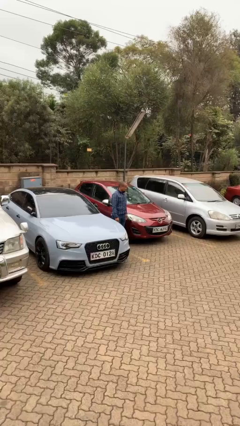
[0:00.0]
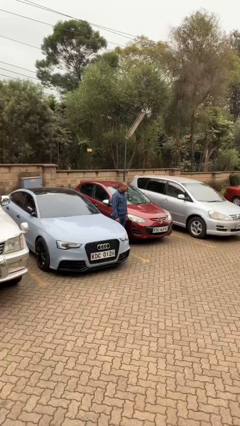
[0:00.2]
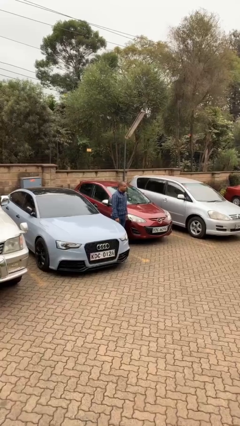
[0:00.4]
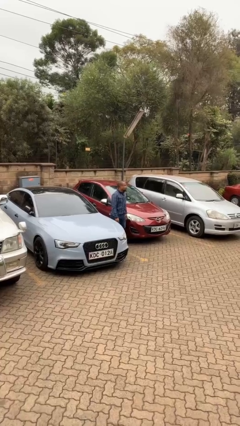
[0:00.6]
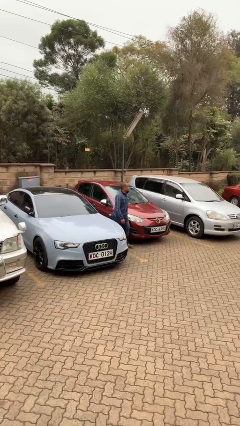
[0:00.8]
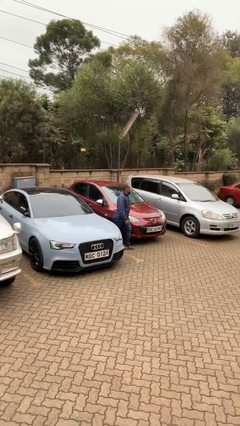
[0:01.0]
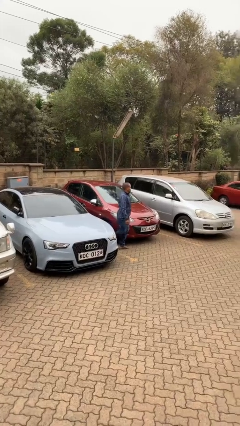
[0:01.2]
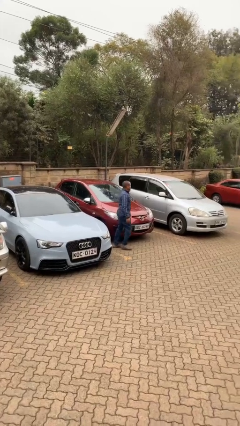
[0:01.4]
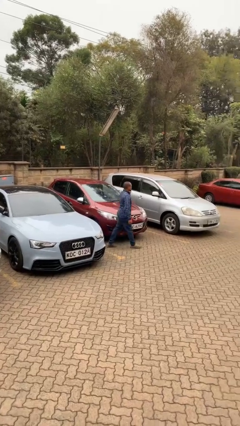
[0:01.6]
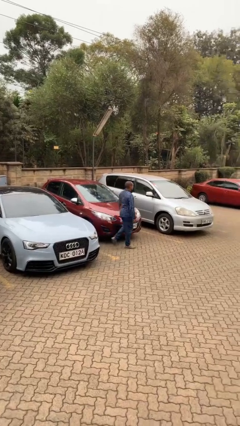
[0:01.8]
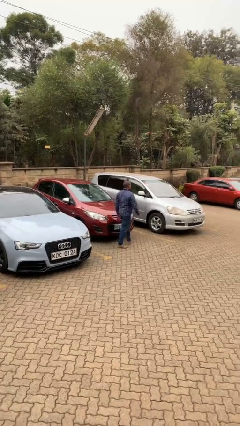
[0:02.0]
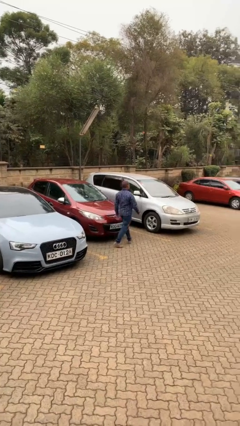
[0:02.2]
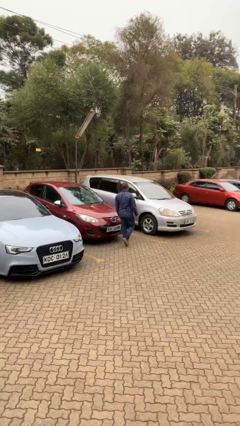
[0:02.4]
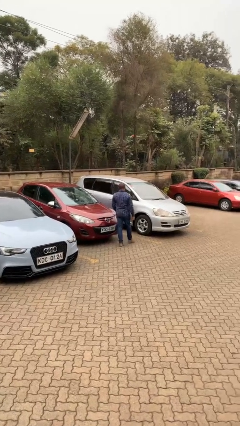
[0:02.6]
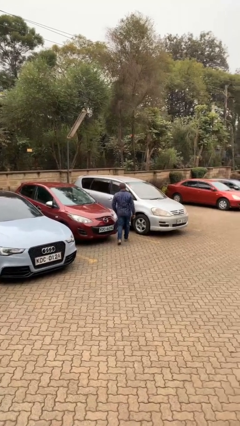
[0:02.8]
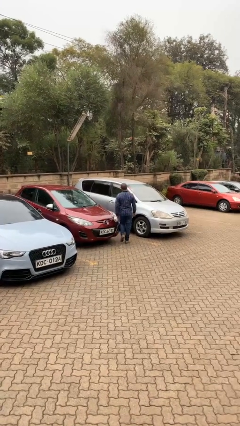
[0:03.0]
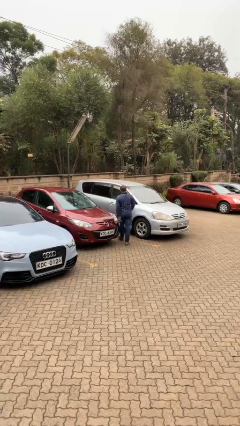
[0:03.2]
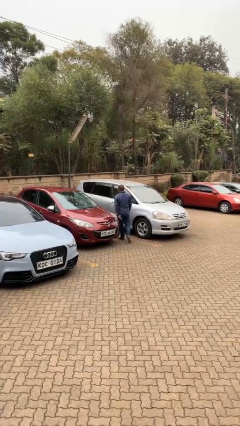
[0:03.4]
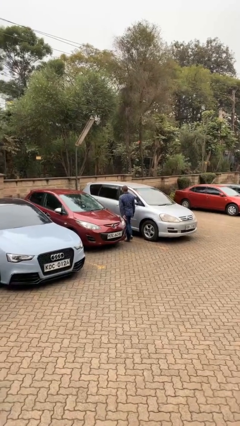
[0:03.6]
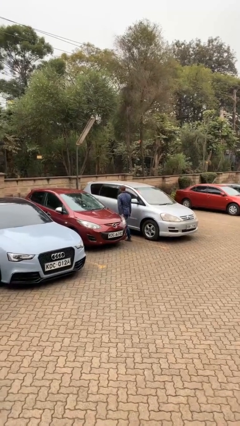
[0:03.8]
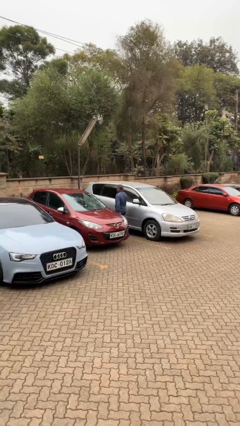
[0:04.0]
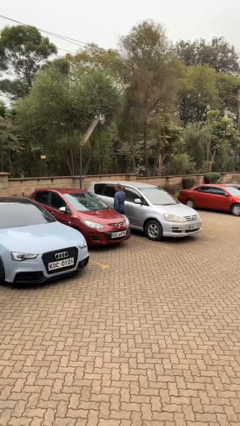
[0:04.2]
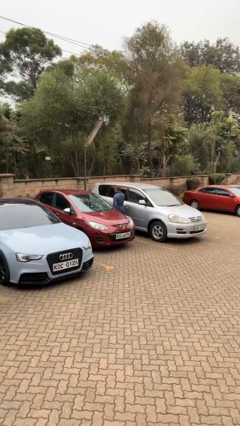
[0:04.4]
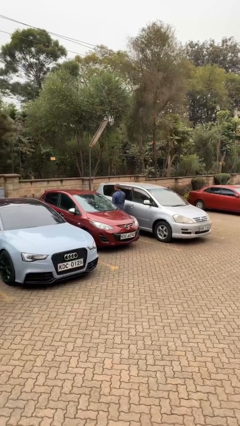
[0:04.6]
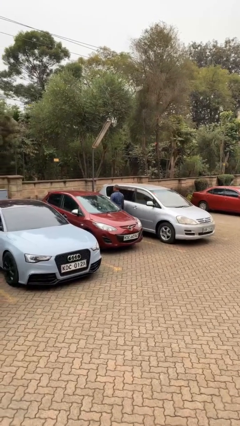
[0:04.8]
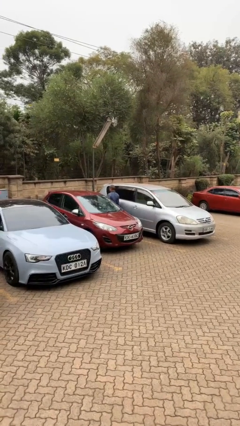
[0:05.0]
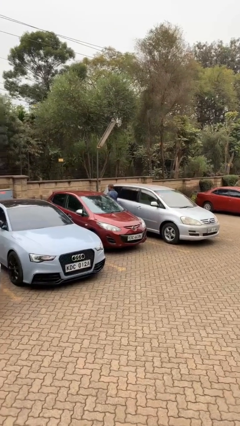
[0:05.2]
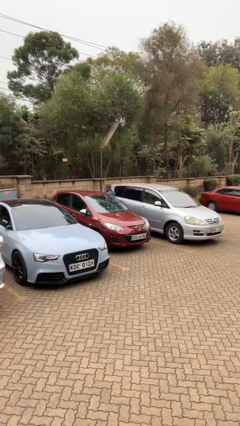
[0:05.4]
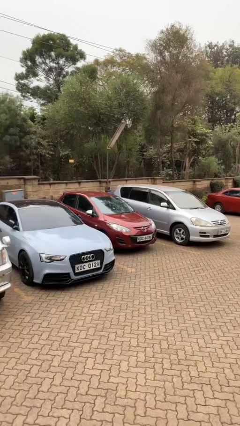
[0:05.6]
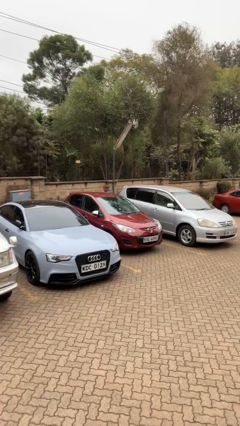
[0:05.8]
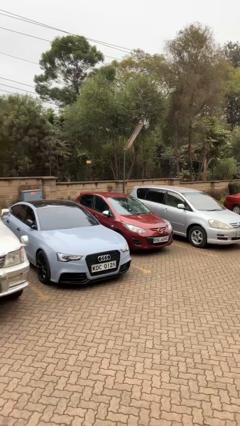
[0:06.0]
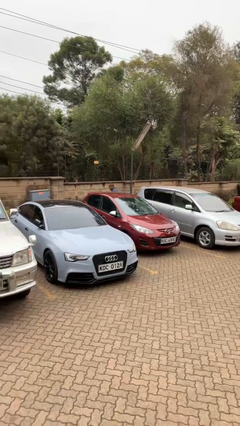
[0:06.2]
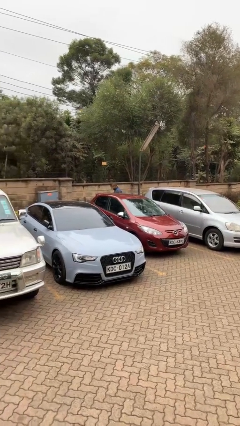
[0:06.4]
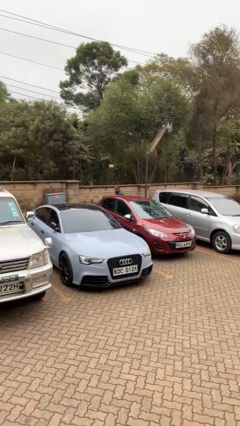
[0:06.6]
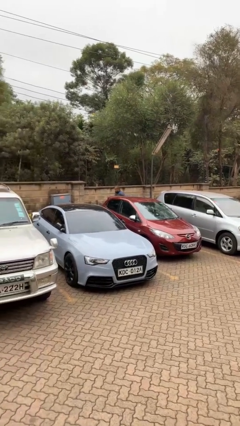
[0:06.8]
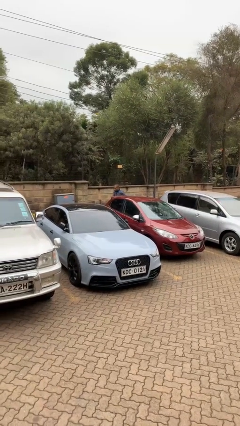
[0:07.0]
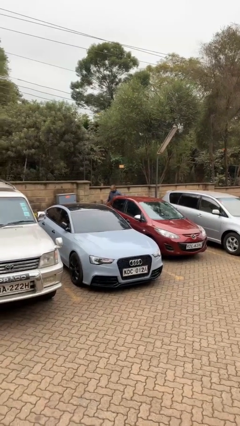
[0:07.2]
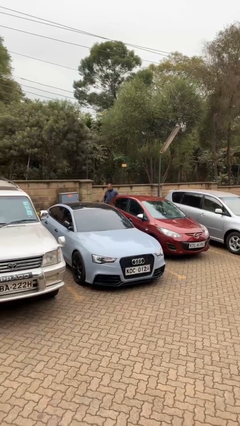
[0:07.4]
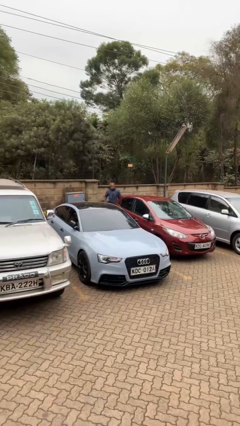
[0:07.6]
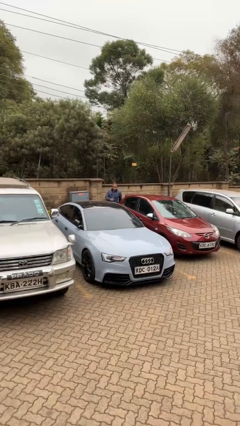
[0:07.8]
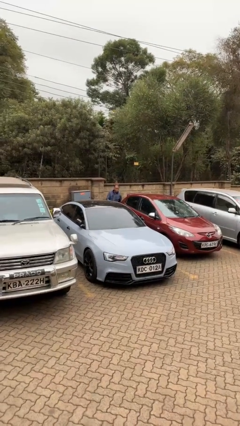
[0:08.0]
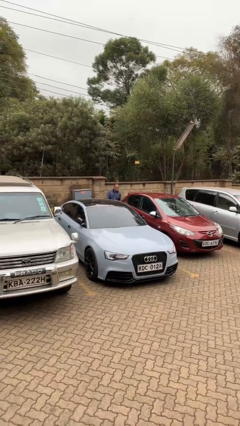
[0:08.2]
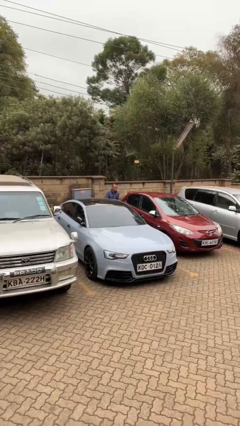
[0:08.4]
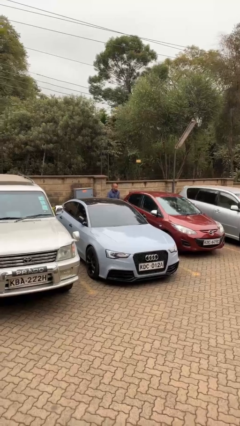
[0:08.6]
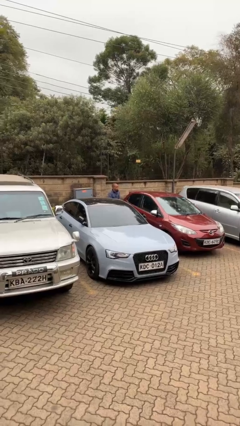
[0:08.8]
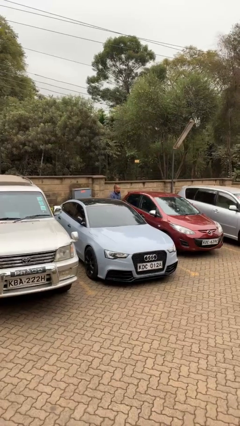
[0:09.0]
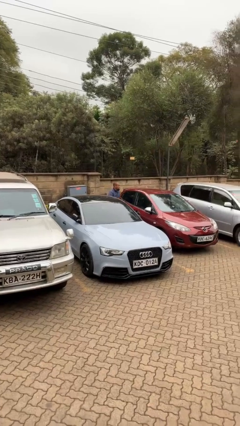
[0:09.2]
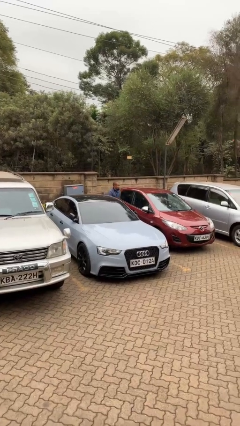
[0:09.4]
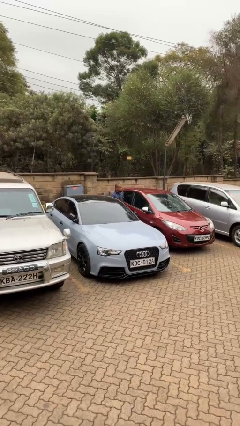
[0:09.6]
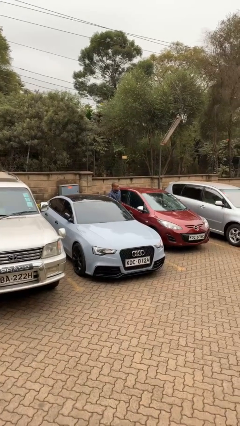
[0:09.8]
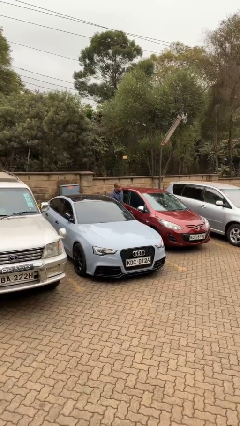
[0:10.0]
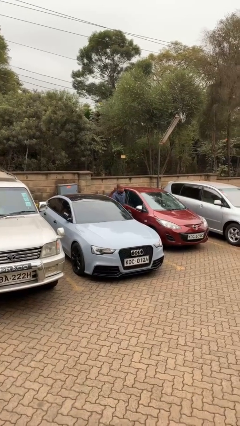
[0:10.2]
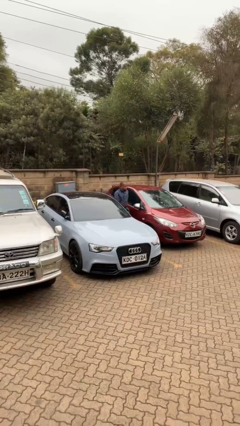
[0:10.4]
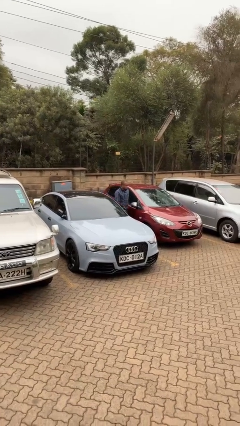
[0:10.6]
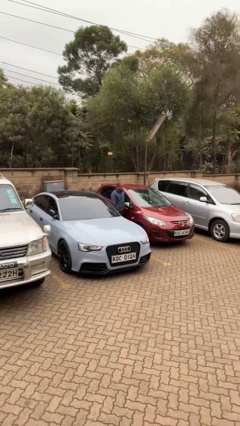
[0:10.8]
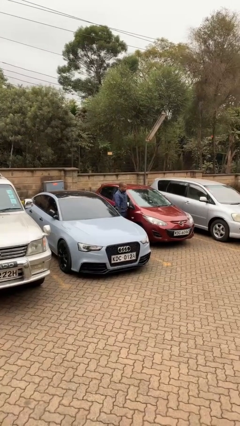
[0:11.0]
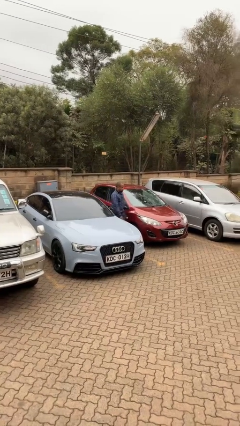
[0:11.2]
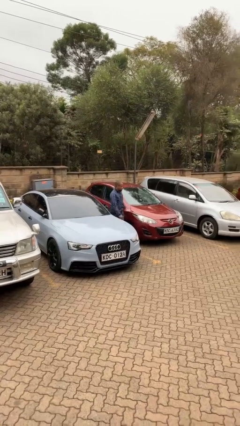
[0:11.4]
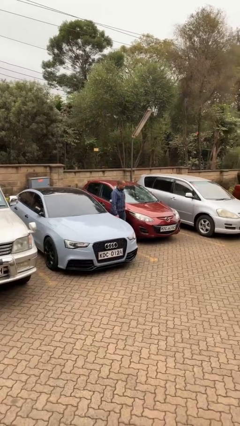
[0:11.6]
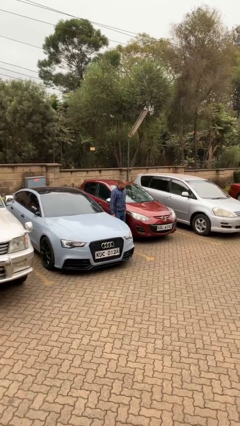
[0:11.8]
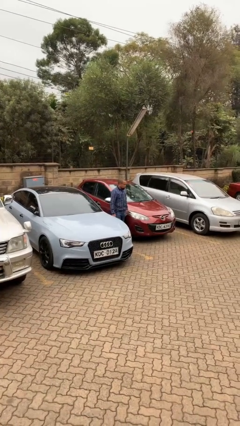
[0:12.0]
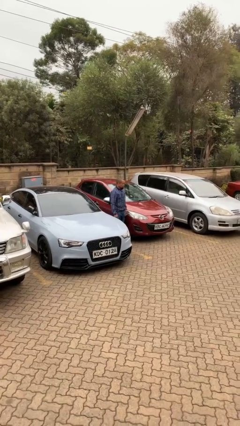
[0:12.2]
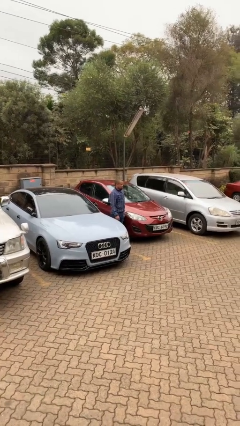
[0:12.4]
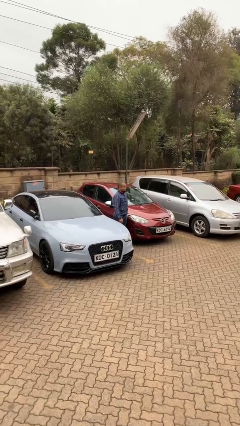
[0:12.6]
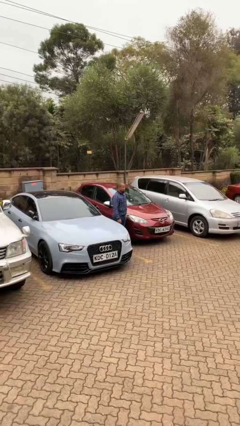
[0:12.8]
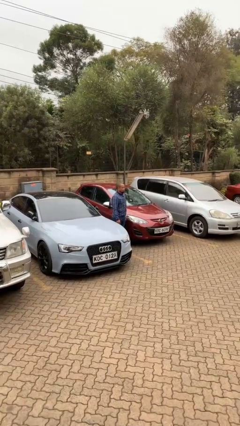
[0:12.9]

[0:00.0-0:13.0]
person walks around car

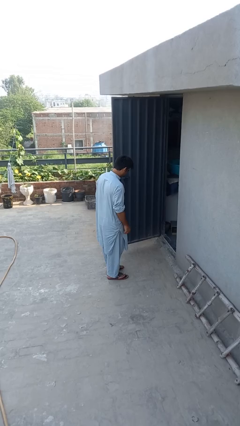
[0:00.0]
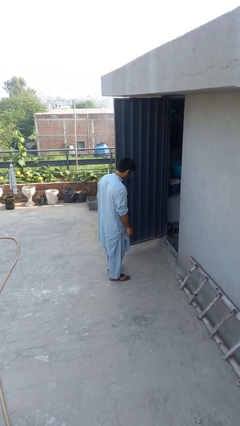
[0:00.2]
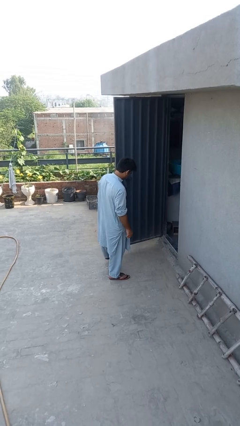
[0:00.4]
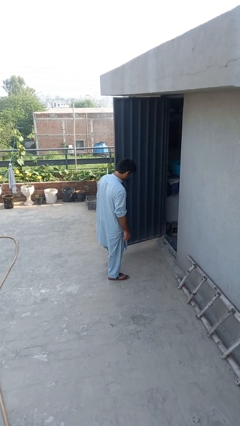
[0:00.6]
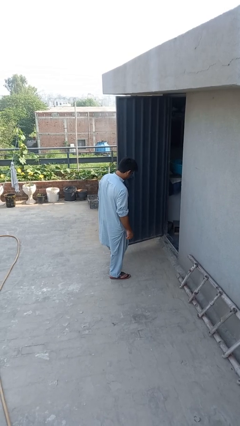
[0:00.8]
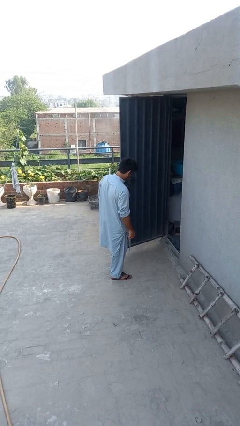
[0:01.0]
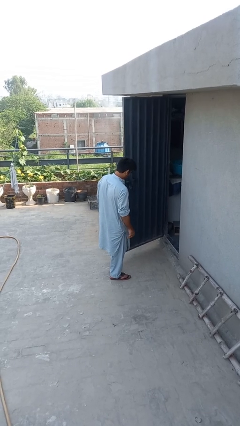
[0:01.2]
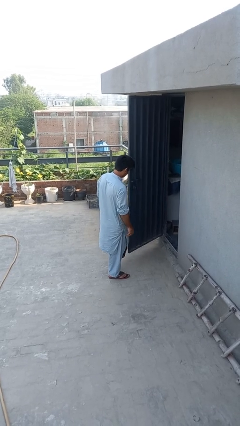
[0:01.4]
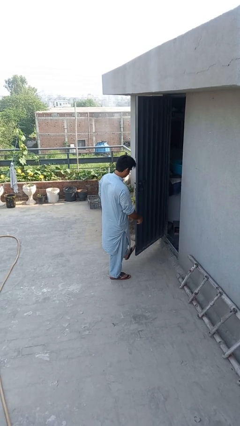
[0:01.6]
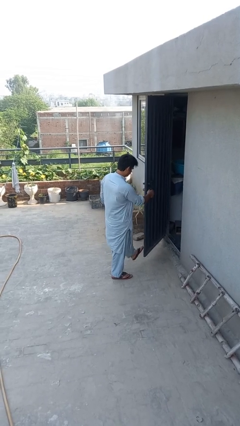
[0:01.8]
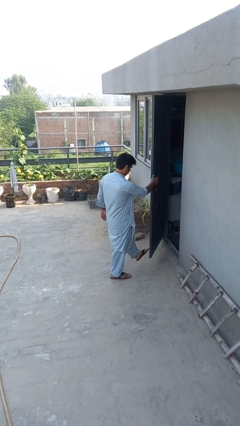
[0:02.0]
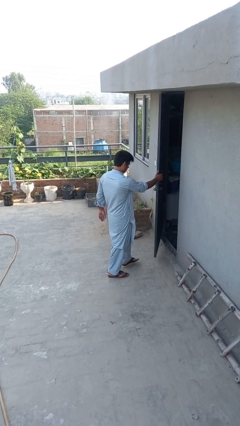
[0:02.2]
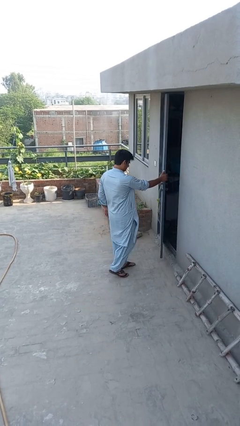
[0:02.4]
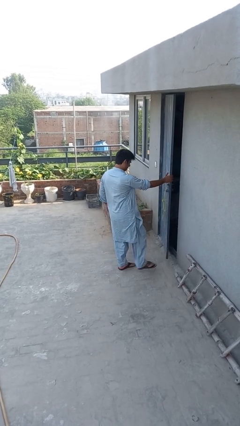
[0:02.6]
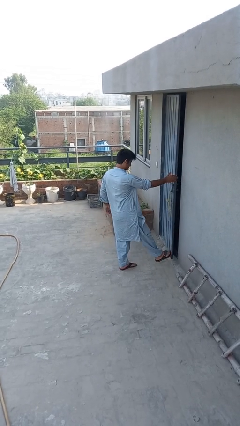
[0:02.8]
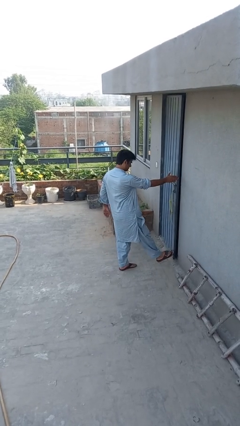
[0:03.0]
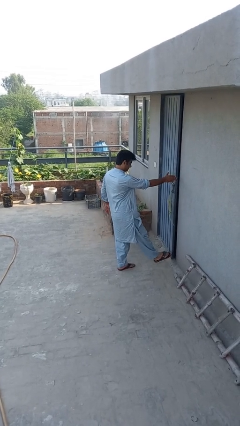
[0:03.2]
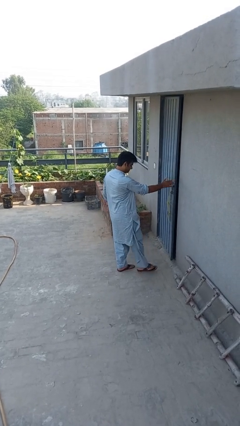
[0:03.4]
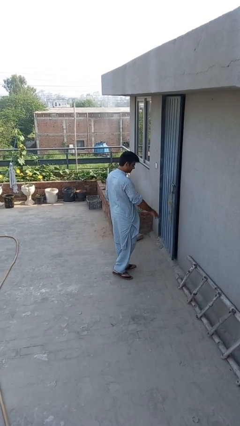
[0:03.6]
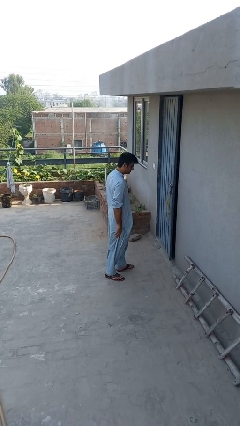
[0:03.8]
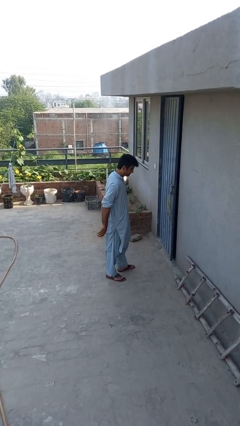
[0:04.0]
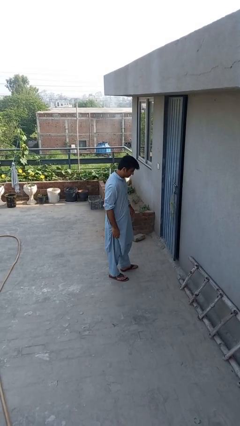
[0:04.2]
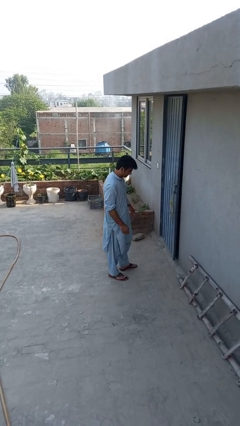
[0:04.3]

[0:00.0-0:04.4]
person closes door with foot

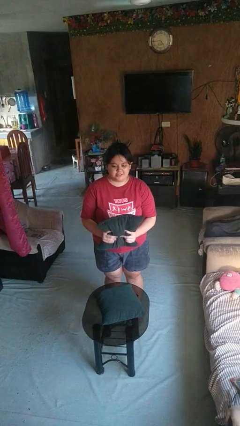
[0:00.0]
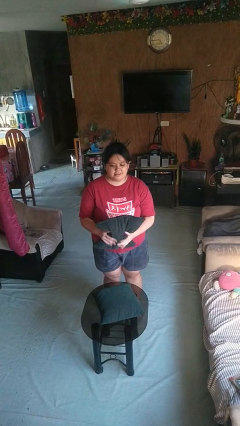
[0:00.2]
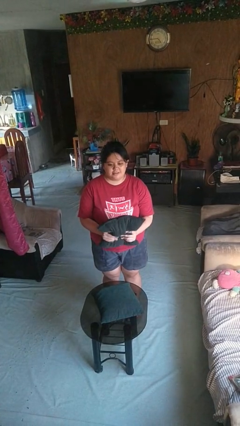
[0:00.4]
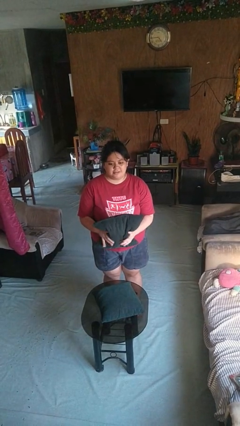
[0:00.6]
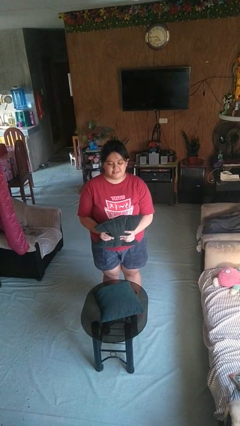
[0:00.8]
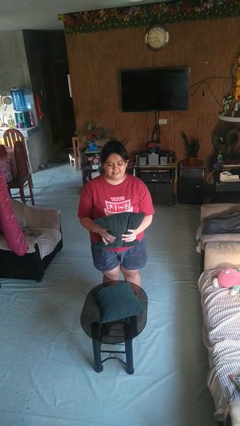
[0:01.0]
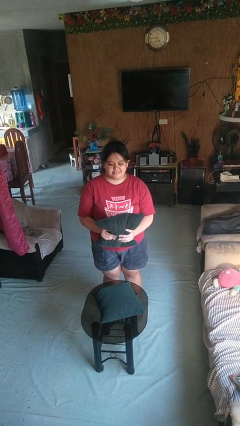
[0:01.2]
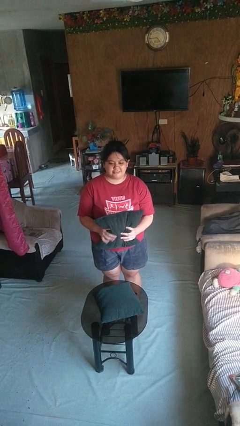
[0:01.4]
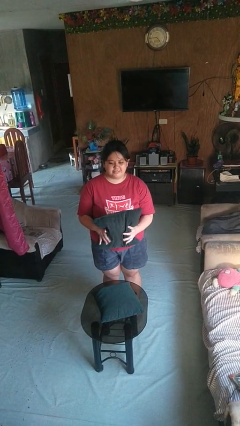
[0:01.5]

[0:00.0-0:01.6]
person squeezes object
